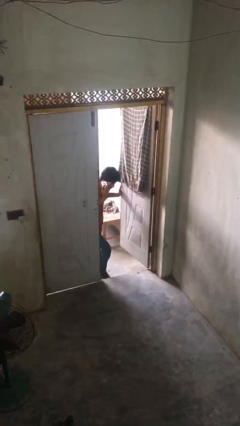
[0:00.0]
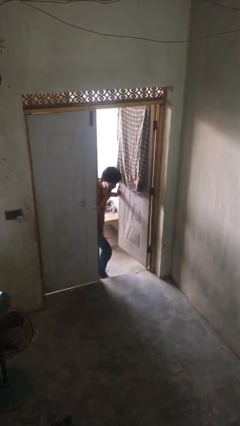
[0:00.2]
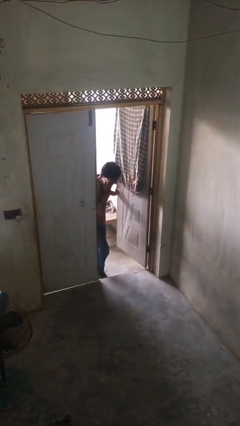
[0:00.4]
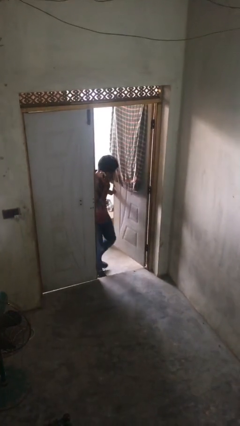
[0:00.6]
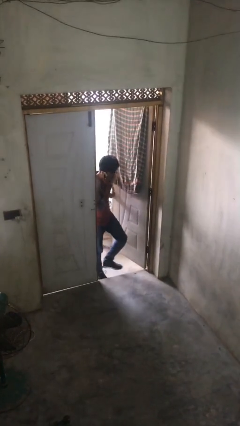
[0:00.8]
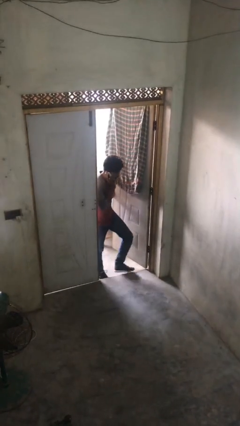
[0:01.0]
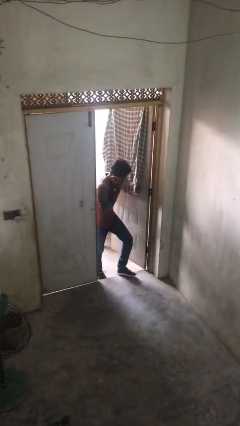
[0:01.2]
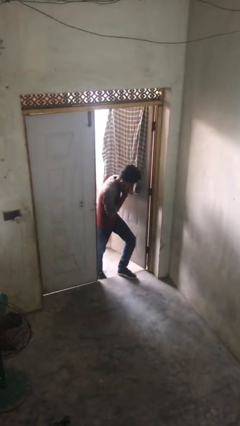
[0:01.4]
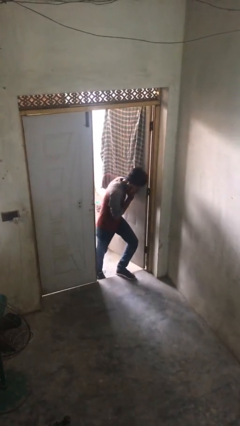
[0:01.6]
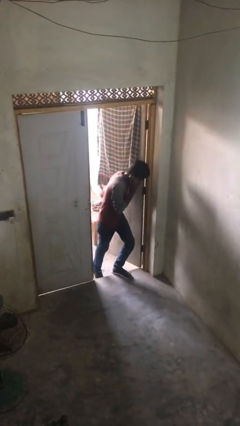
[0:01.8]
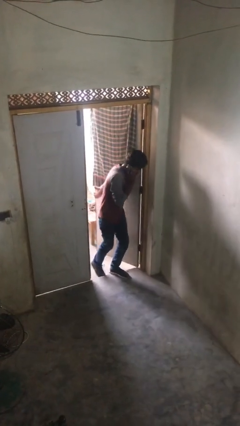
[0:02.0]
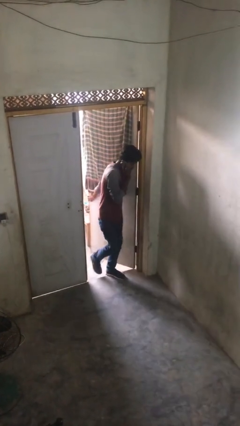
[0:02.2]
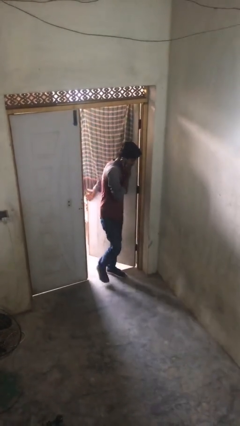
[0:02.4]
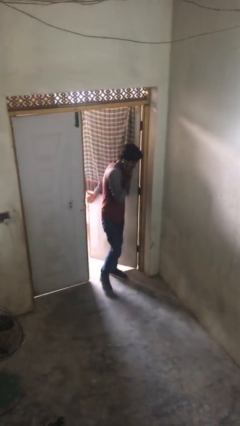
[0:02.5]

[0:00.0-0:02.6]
person enters scene through structure

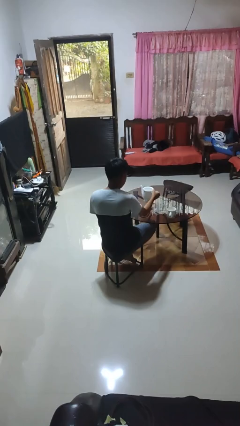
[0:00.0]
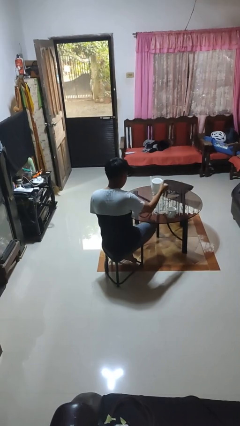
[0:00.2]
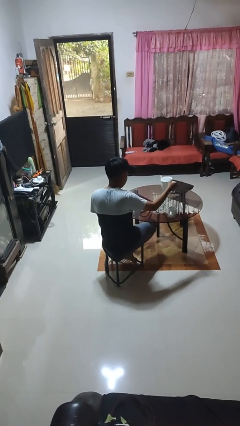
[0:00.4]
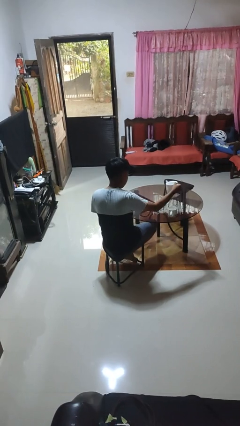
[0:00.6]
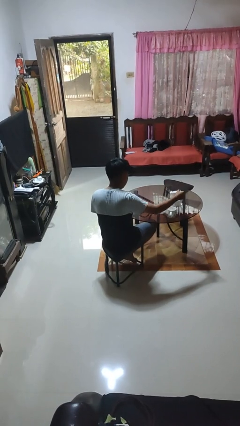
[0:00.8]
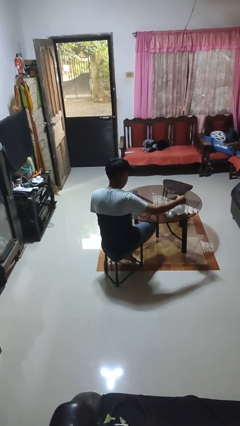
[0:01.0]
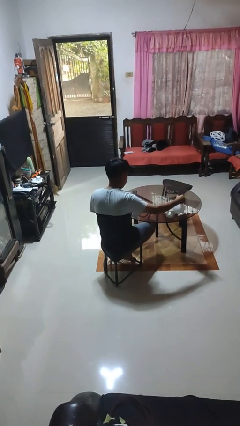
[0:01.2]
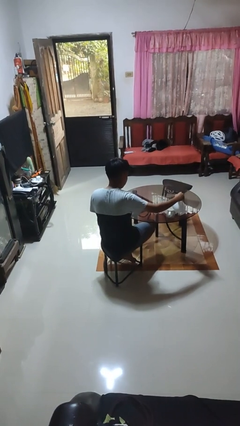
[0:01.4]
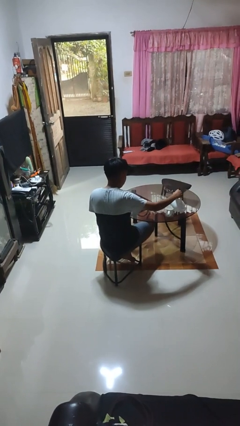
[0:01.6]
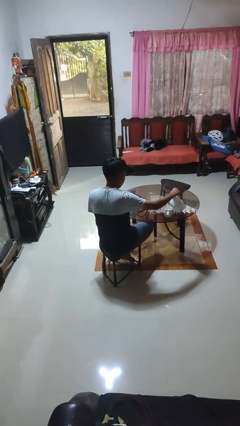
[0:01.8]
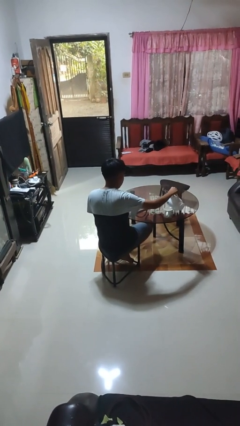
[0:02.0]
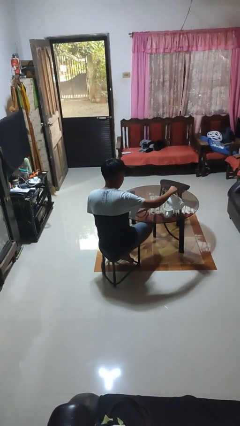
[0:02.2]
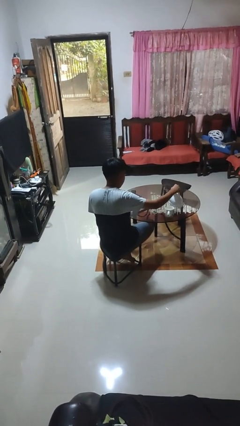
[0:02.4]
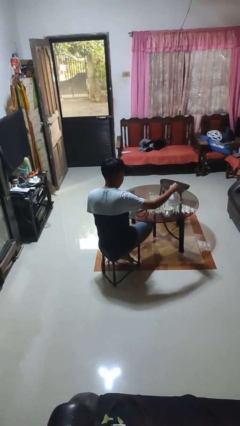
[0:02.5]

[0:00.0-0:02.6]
person pours coffee into mug

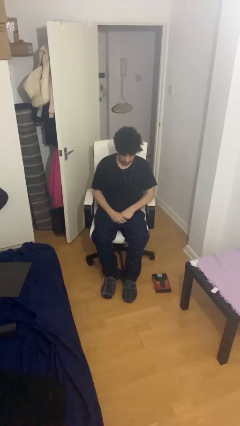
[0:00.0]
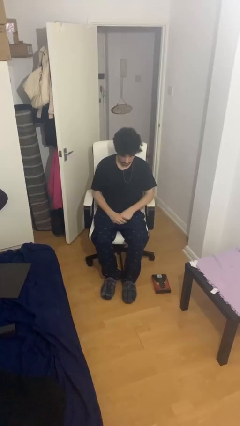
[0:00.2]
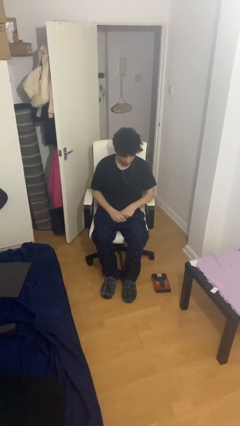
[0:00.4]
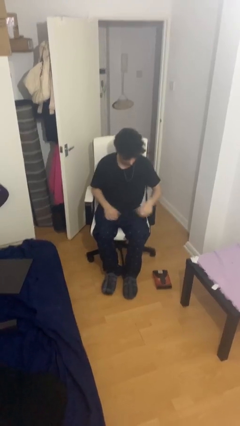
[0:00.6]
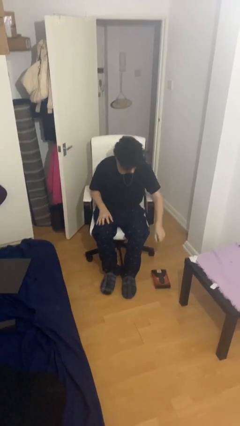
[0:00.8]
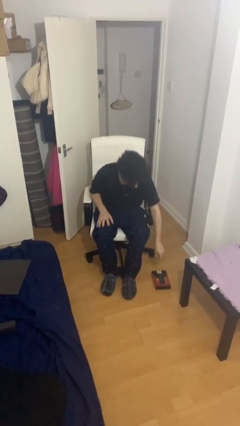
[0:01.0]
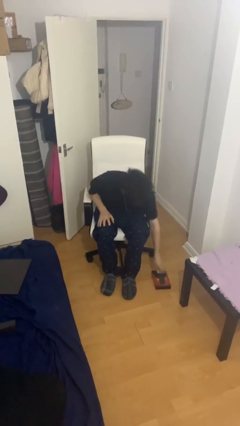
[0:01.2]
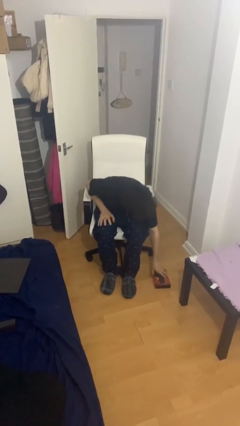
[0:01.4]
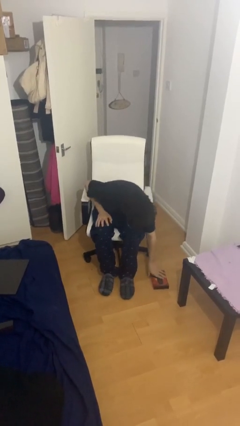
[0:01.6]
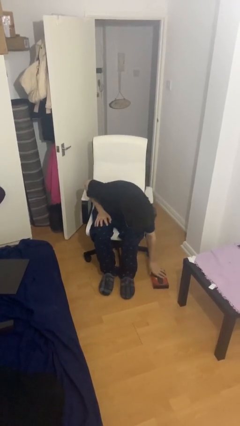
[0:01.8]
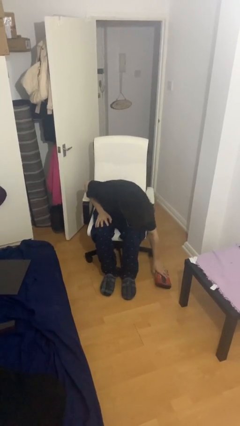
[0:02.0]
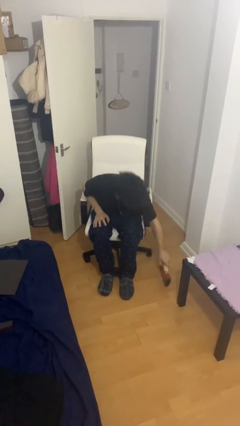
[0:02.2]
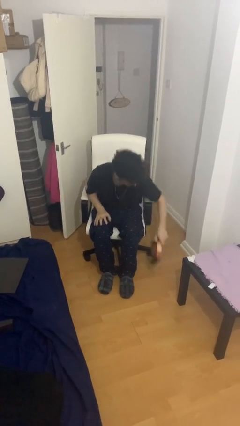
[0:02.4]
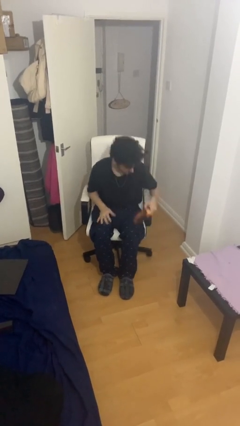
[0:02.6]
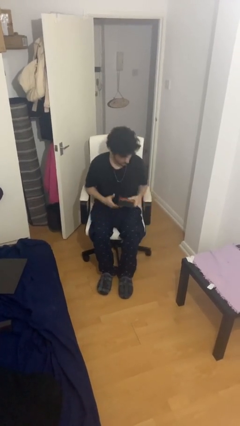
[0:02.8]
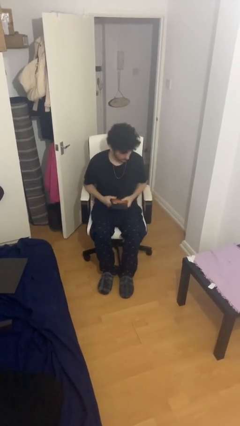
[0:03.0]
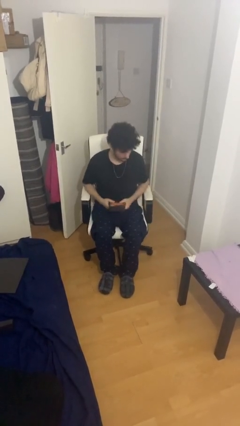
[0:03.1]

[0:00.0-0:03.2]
person picks up object from floor

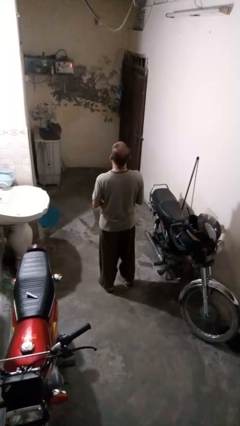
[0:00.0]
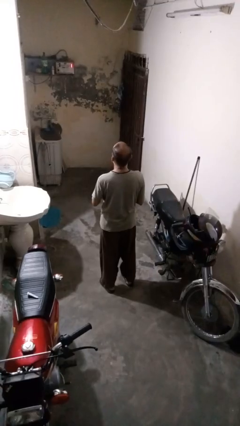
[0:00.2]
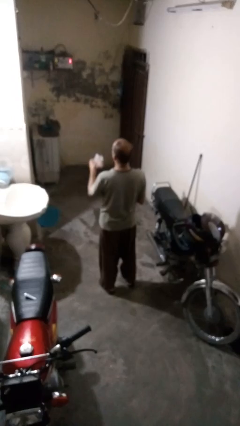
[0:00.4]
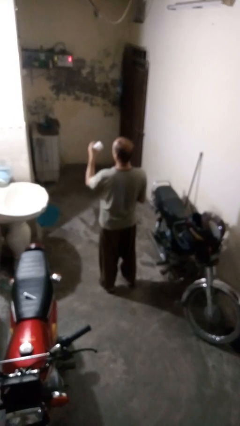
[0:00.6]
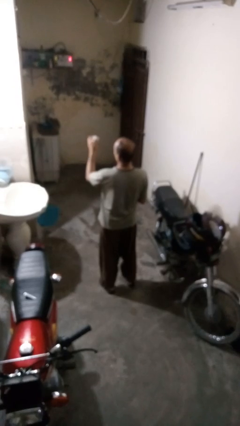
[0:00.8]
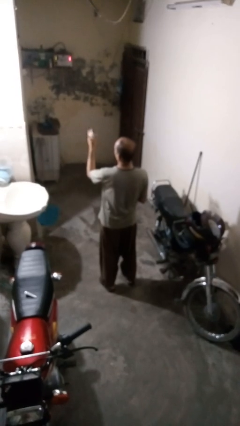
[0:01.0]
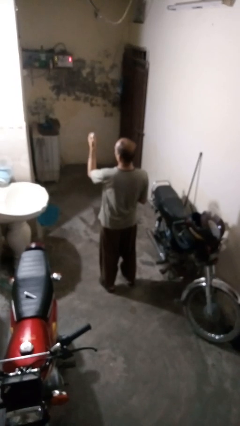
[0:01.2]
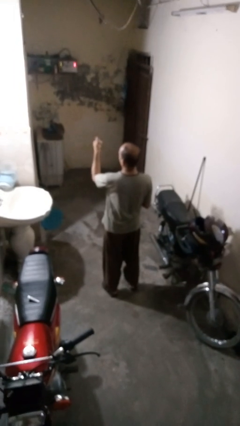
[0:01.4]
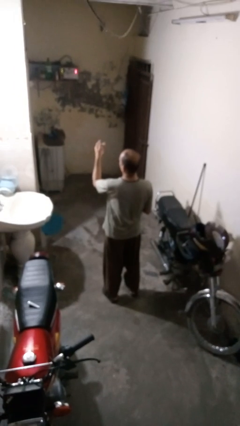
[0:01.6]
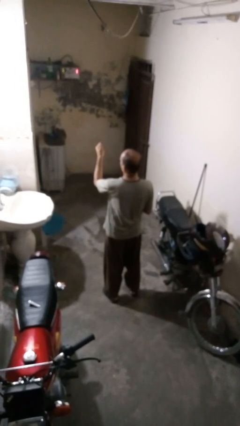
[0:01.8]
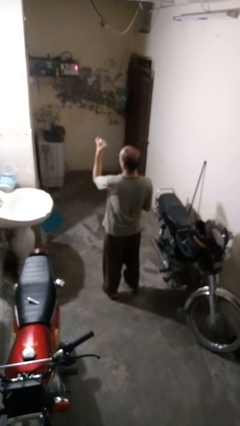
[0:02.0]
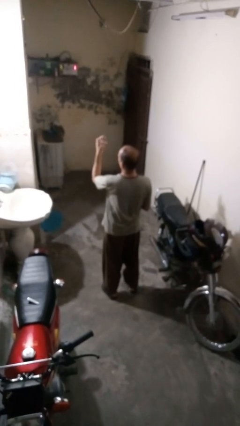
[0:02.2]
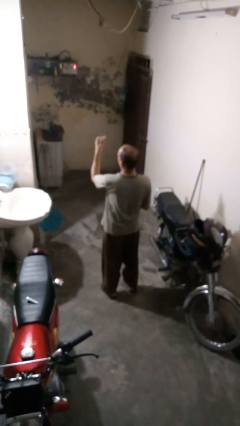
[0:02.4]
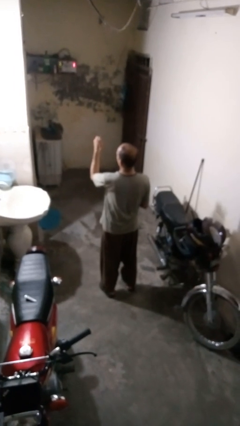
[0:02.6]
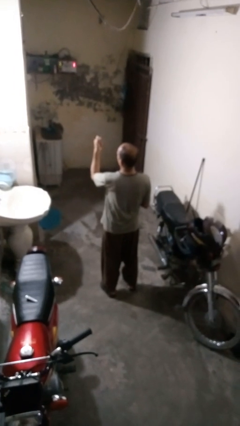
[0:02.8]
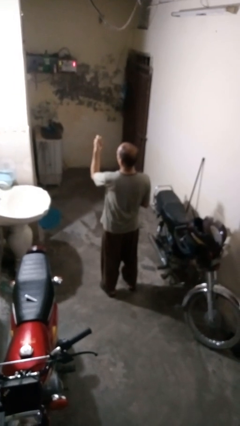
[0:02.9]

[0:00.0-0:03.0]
person crumples paper

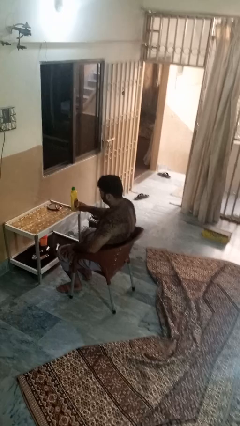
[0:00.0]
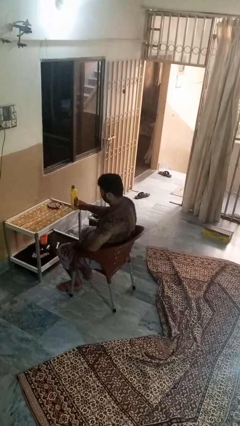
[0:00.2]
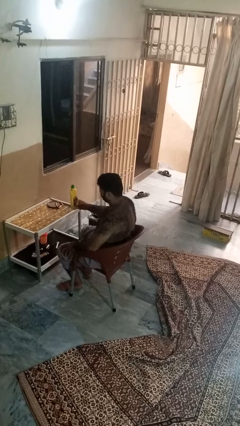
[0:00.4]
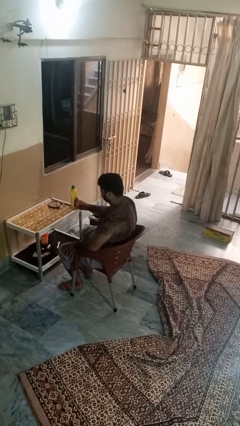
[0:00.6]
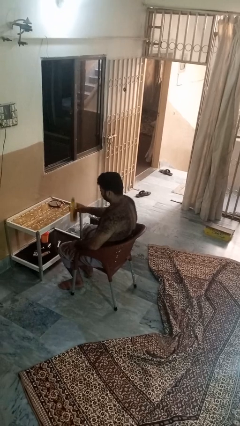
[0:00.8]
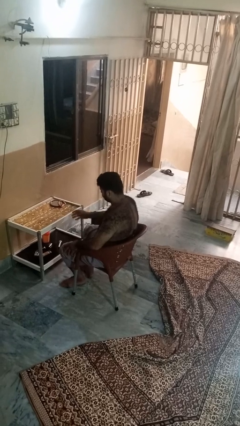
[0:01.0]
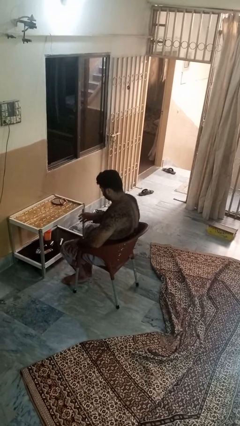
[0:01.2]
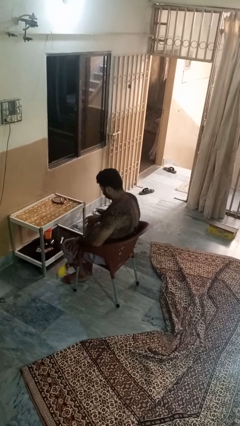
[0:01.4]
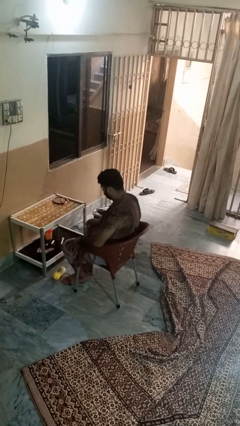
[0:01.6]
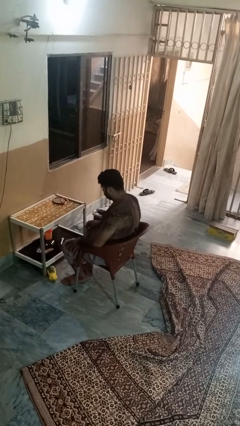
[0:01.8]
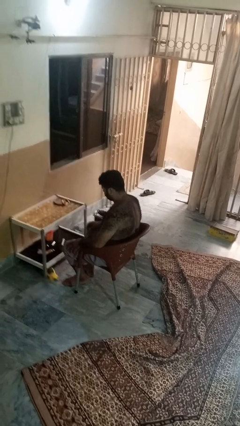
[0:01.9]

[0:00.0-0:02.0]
person throws object to ground

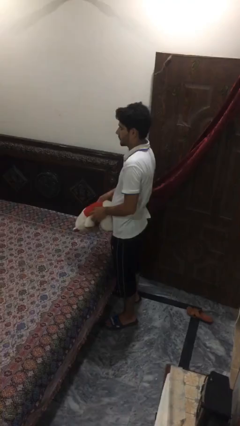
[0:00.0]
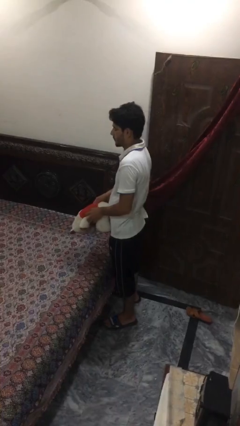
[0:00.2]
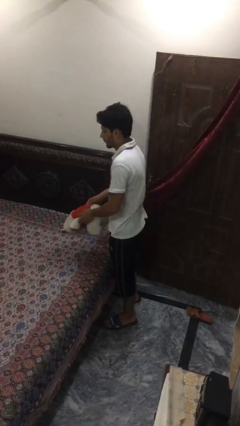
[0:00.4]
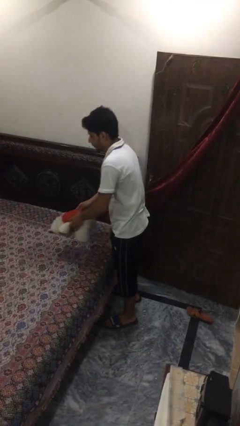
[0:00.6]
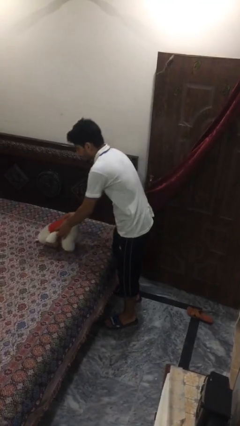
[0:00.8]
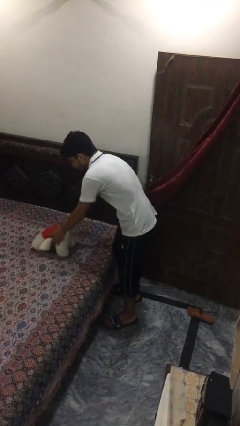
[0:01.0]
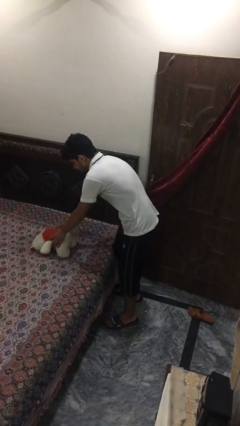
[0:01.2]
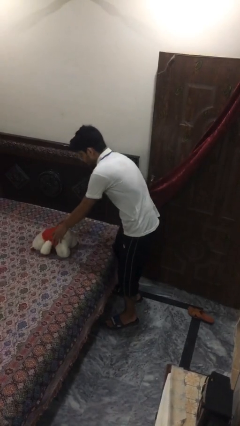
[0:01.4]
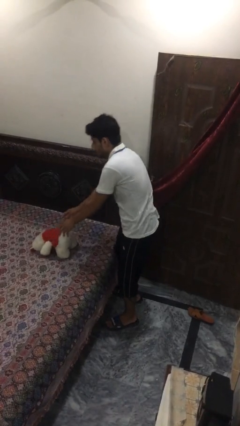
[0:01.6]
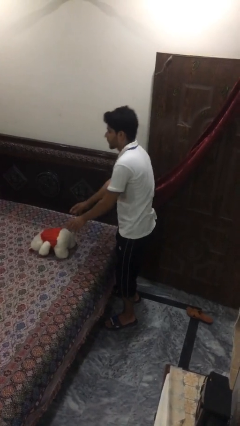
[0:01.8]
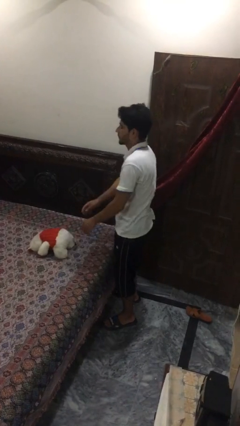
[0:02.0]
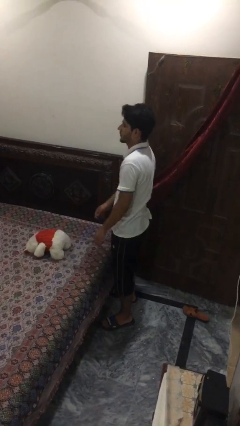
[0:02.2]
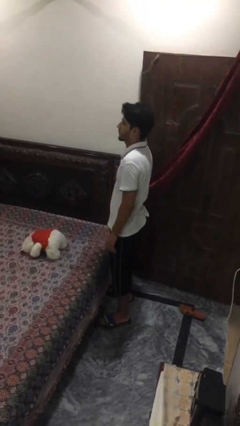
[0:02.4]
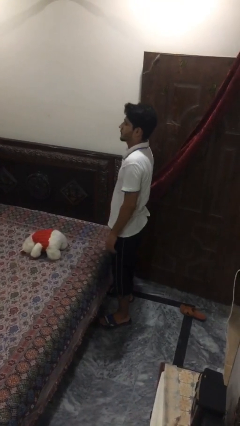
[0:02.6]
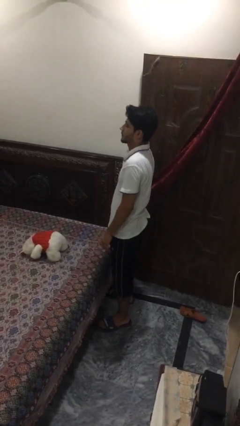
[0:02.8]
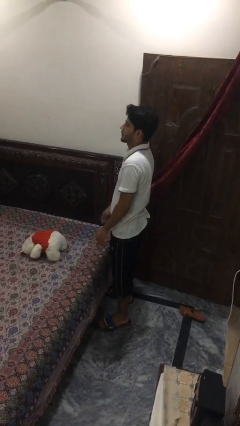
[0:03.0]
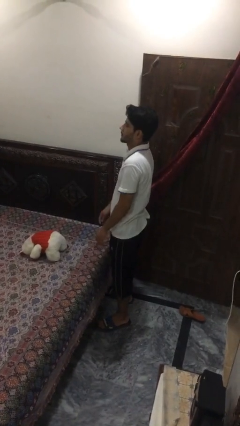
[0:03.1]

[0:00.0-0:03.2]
person puts down object on bed

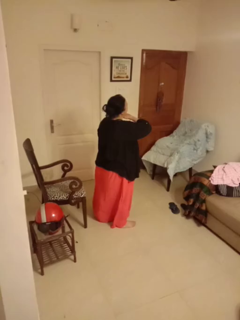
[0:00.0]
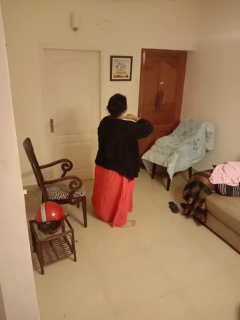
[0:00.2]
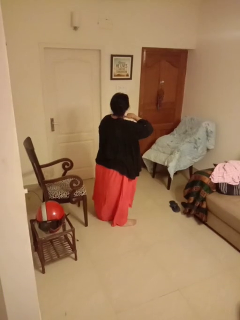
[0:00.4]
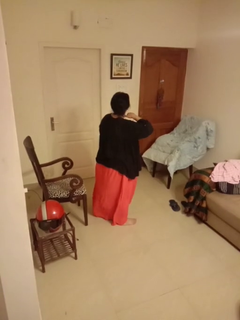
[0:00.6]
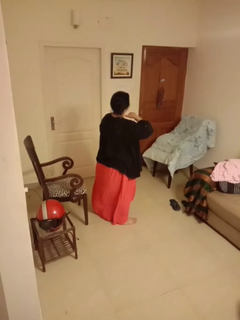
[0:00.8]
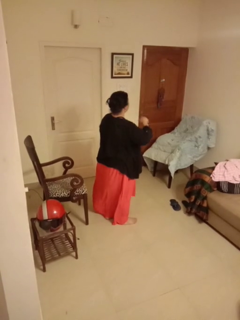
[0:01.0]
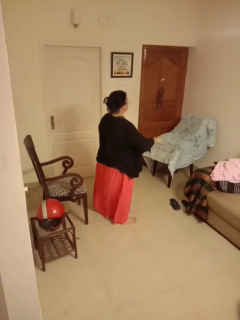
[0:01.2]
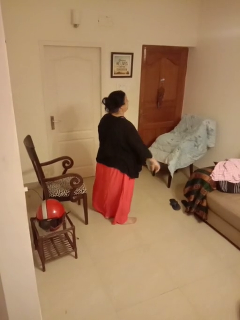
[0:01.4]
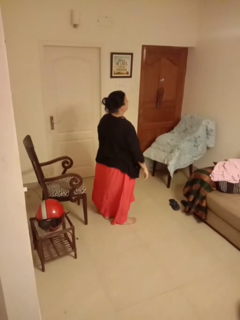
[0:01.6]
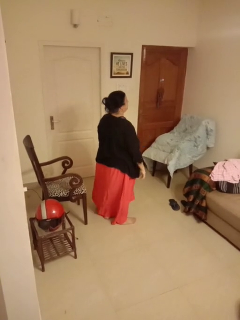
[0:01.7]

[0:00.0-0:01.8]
person gestures cut
